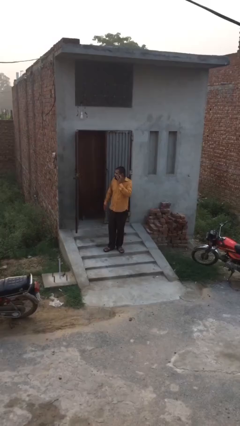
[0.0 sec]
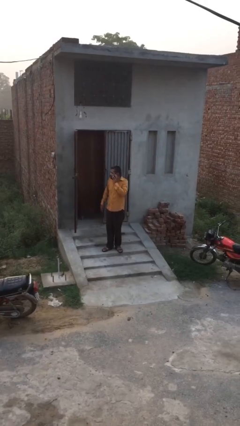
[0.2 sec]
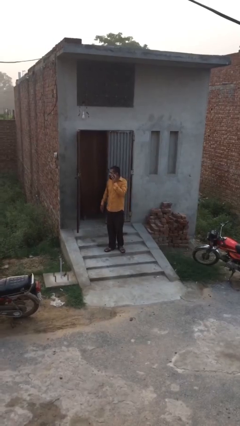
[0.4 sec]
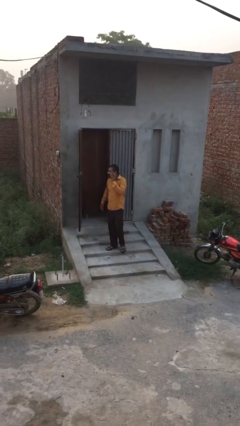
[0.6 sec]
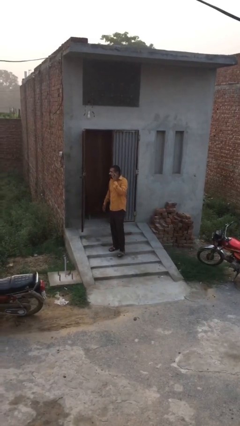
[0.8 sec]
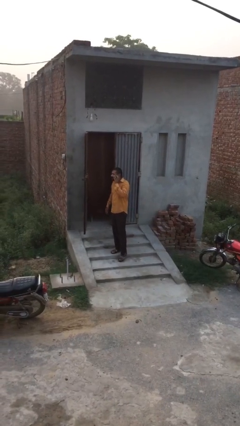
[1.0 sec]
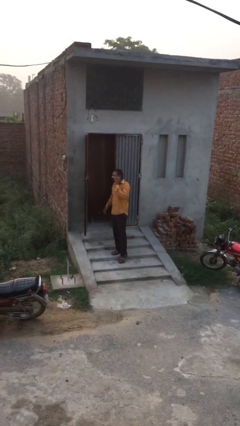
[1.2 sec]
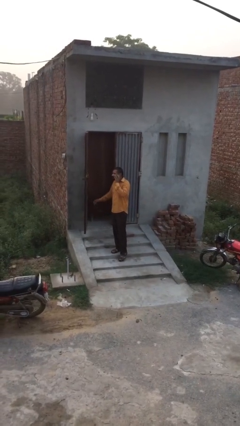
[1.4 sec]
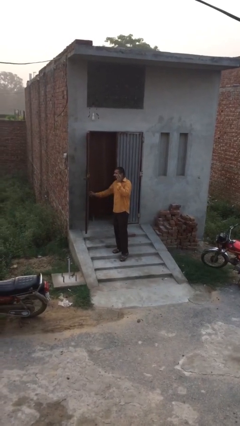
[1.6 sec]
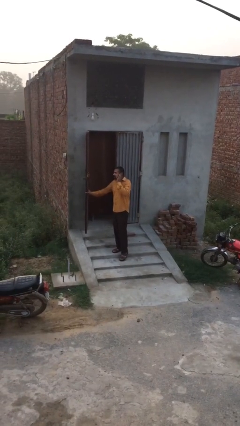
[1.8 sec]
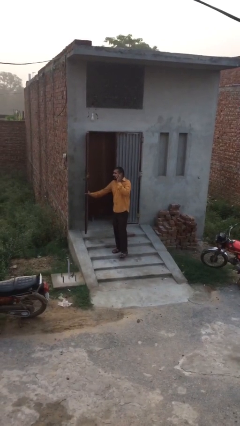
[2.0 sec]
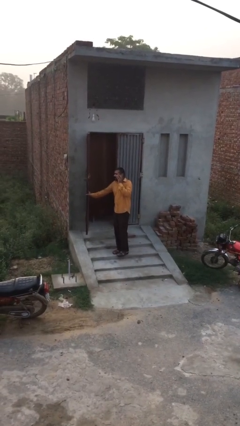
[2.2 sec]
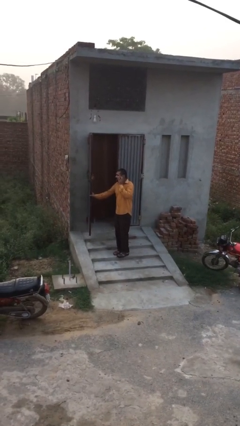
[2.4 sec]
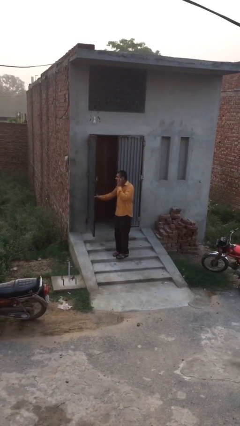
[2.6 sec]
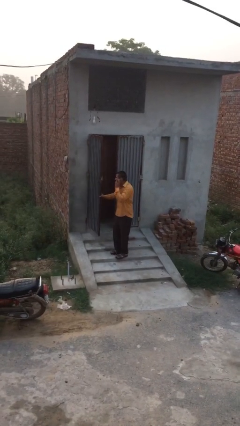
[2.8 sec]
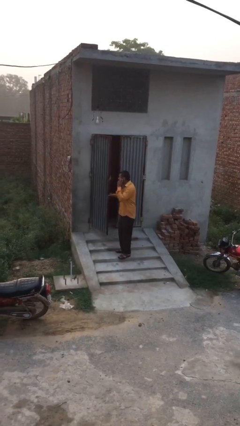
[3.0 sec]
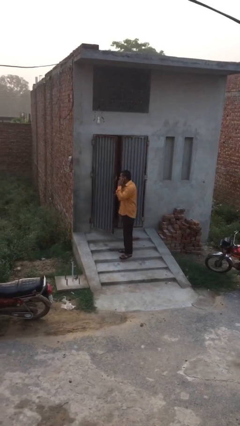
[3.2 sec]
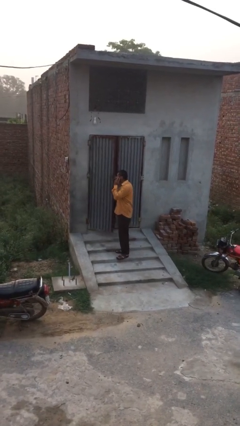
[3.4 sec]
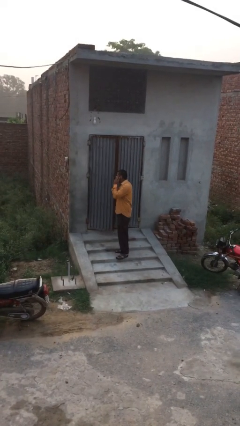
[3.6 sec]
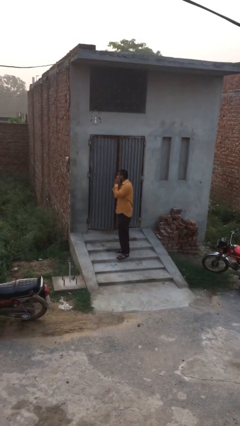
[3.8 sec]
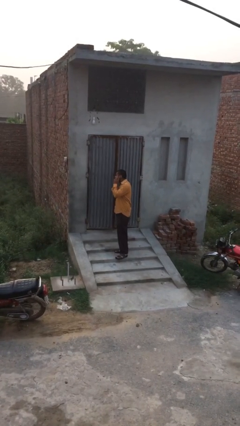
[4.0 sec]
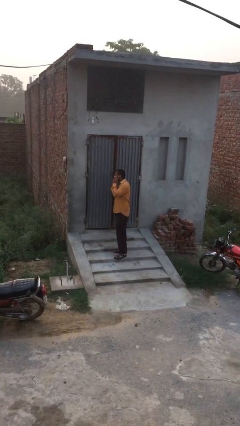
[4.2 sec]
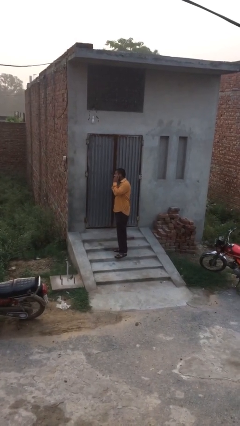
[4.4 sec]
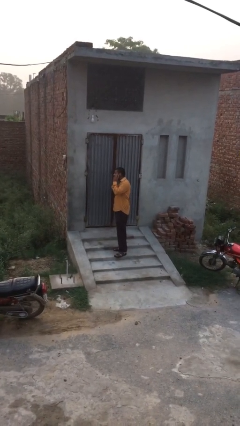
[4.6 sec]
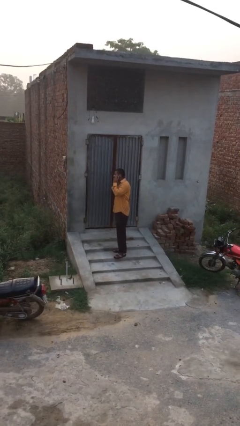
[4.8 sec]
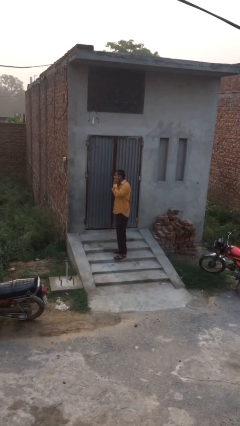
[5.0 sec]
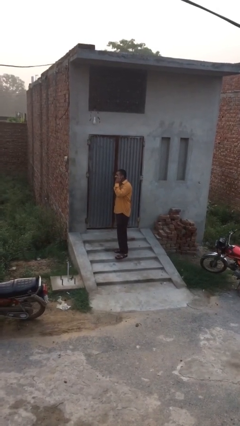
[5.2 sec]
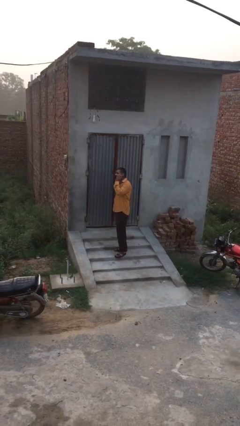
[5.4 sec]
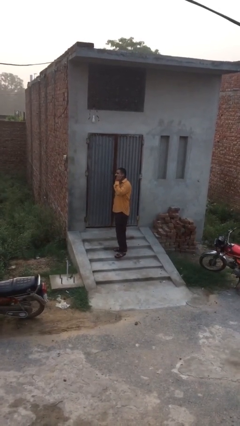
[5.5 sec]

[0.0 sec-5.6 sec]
person closes facility door

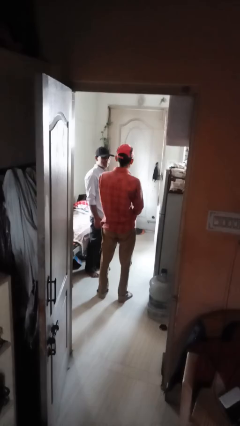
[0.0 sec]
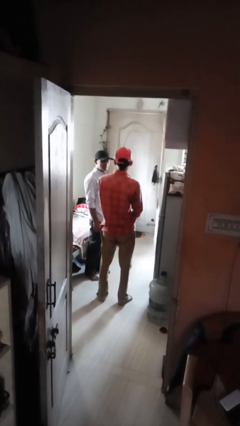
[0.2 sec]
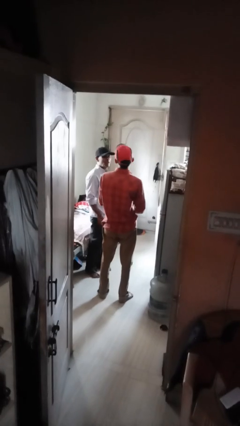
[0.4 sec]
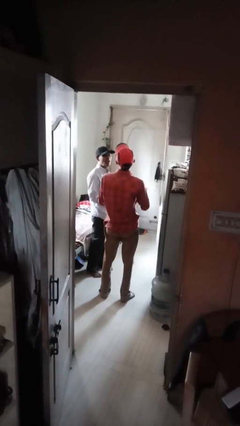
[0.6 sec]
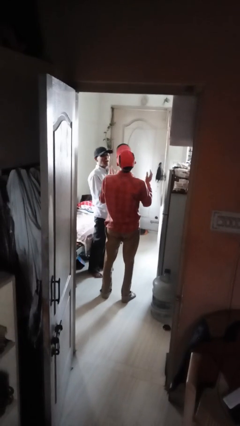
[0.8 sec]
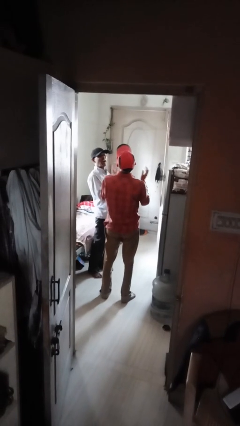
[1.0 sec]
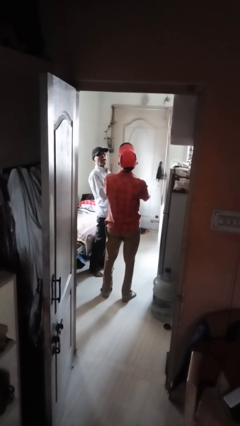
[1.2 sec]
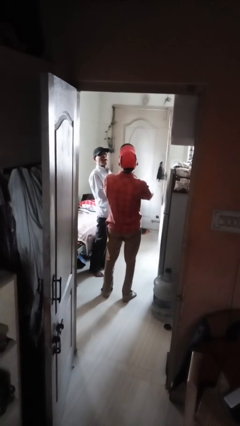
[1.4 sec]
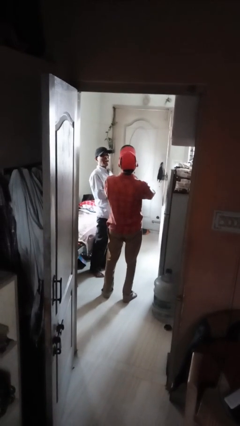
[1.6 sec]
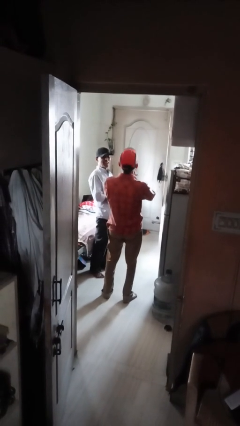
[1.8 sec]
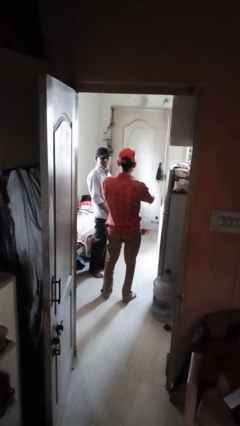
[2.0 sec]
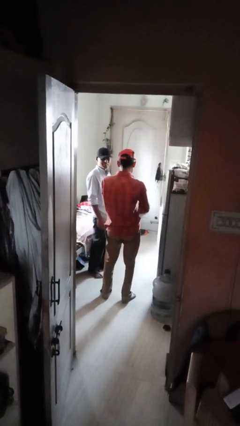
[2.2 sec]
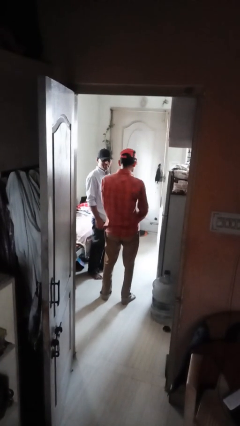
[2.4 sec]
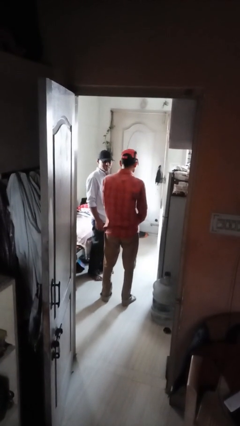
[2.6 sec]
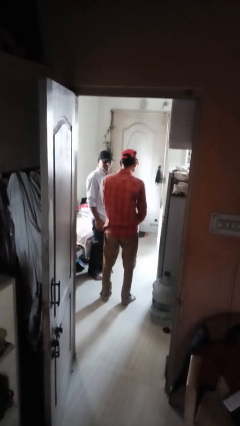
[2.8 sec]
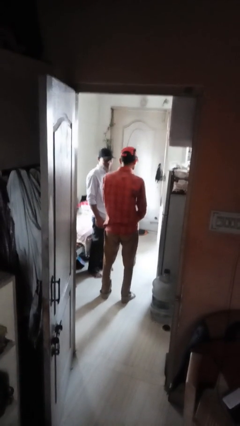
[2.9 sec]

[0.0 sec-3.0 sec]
person laughs with person

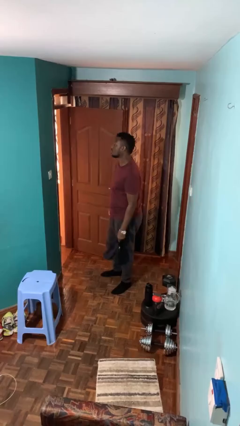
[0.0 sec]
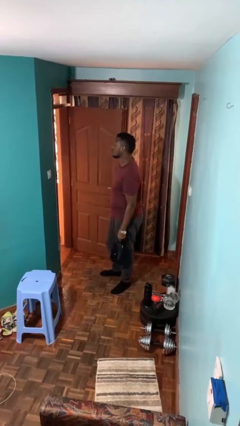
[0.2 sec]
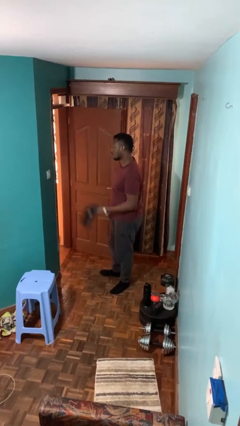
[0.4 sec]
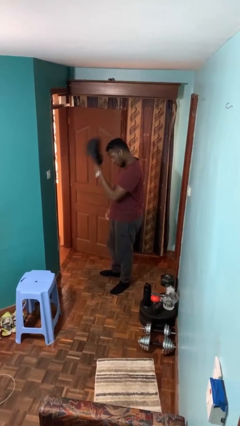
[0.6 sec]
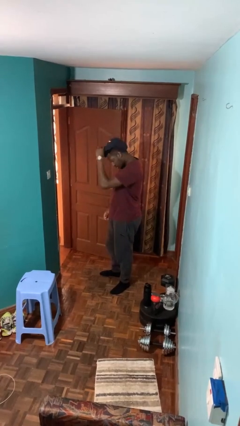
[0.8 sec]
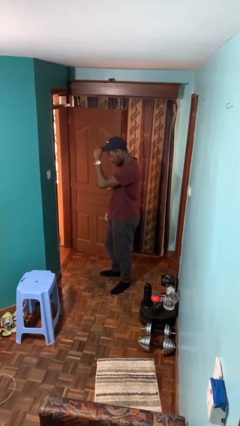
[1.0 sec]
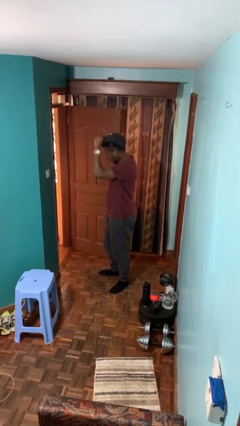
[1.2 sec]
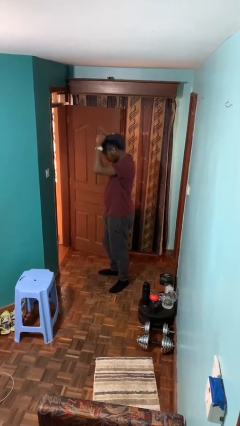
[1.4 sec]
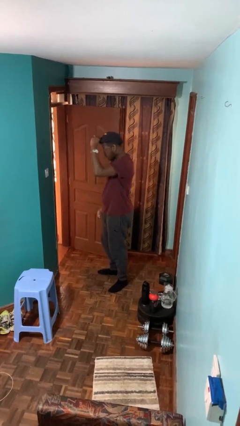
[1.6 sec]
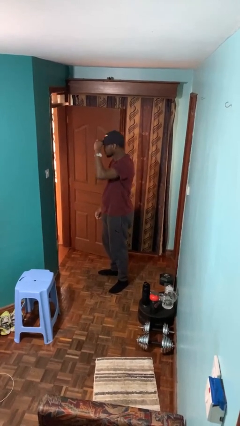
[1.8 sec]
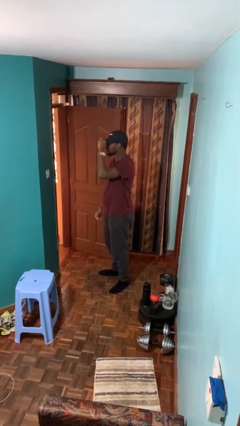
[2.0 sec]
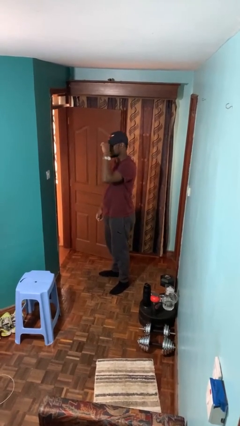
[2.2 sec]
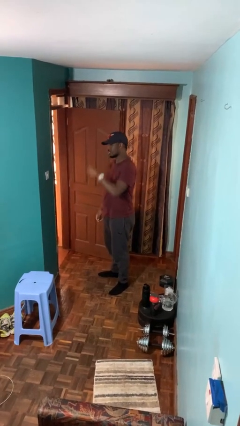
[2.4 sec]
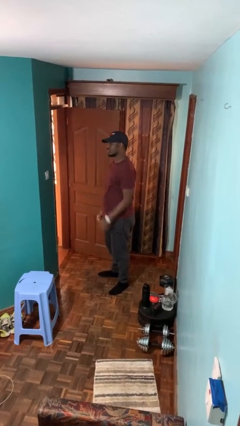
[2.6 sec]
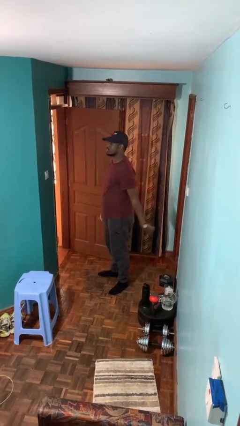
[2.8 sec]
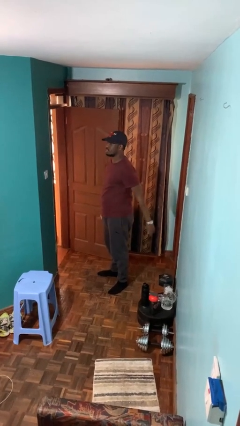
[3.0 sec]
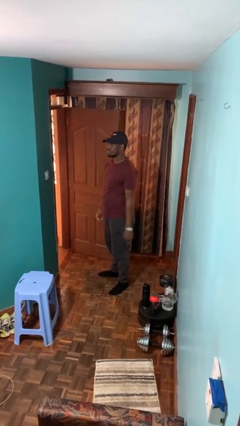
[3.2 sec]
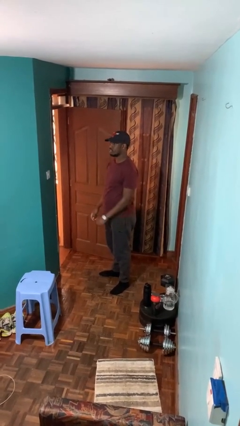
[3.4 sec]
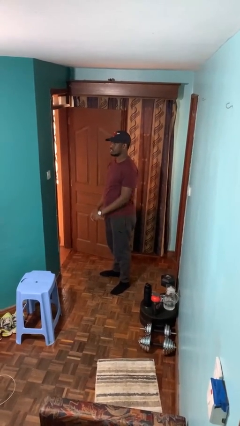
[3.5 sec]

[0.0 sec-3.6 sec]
person puts on hat

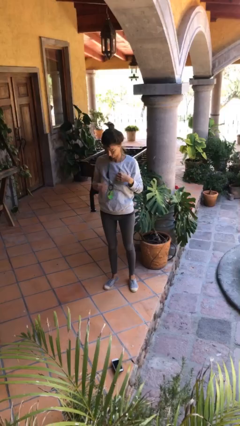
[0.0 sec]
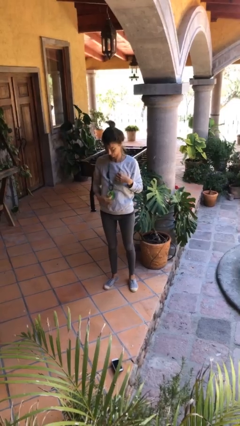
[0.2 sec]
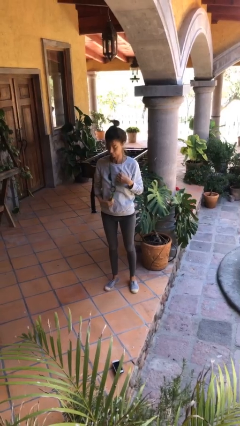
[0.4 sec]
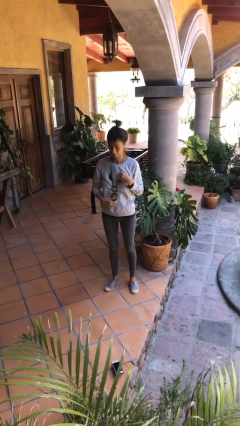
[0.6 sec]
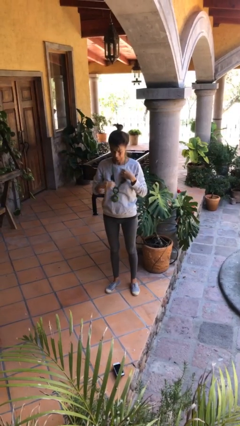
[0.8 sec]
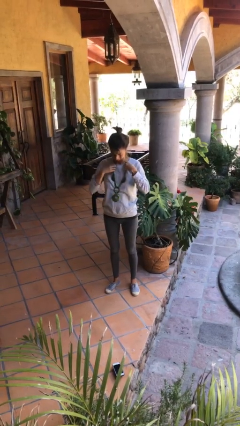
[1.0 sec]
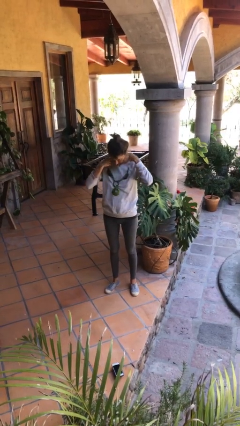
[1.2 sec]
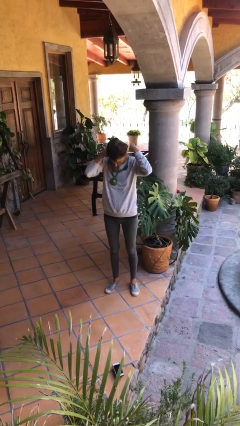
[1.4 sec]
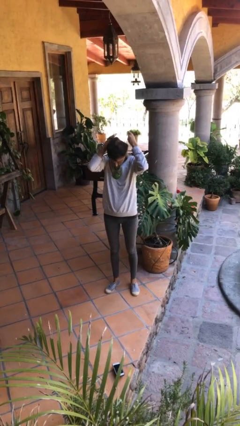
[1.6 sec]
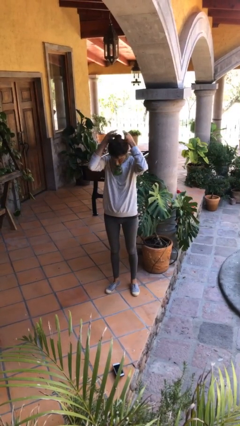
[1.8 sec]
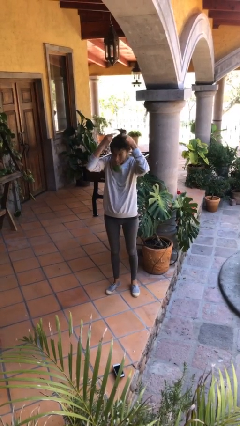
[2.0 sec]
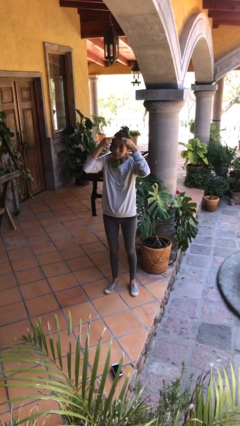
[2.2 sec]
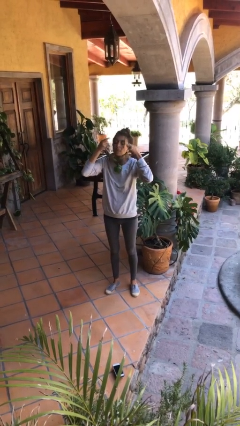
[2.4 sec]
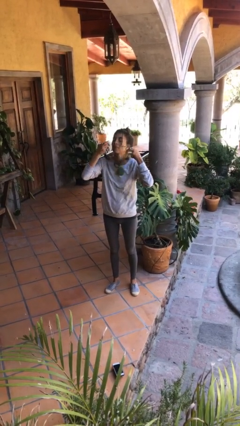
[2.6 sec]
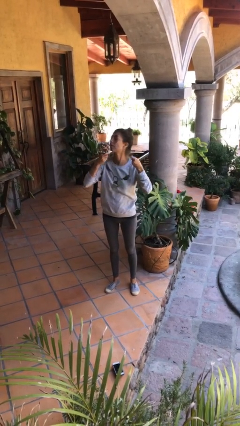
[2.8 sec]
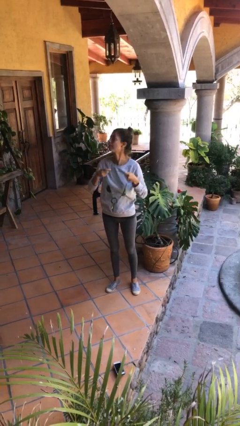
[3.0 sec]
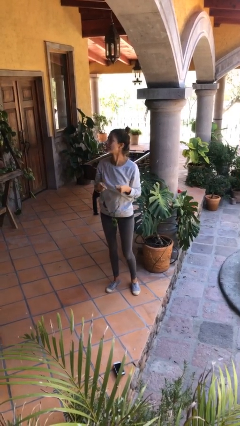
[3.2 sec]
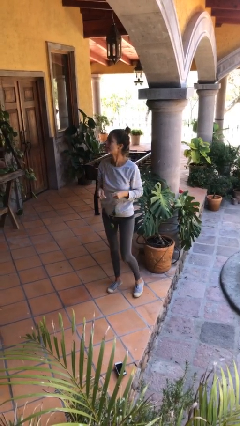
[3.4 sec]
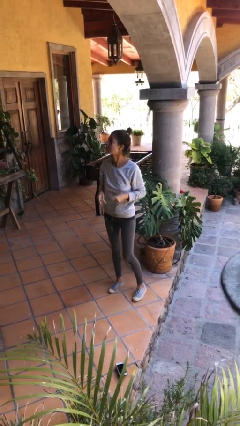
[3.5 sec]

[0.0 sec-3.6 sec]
person takes off necklace

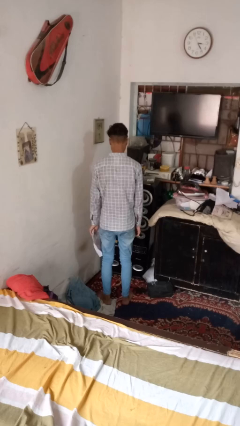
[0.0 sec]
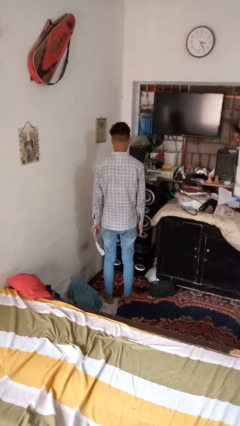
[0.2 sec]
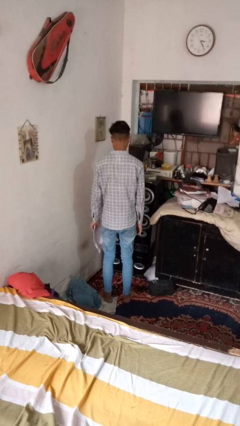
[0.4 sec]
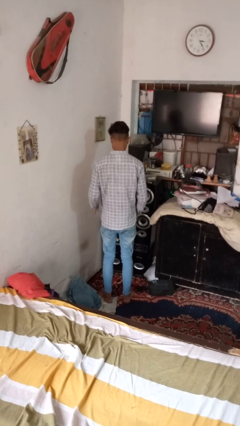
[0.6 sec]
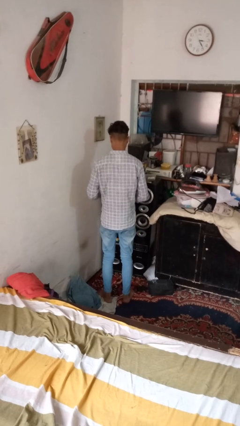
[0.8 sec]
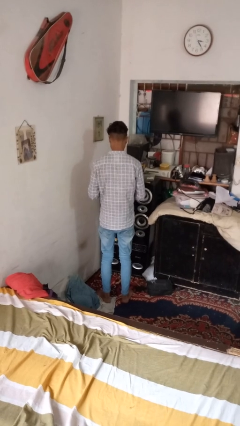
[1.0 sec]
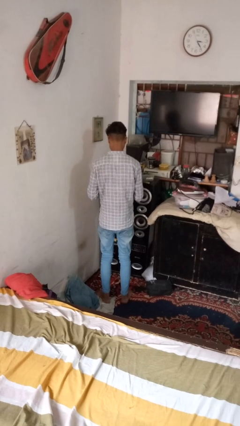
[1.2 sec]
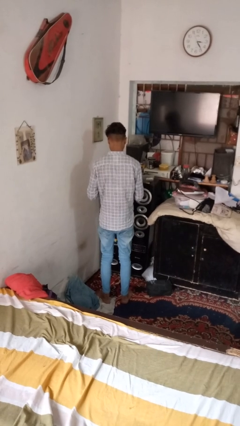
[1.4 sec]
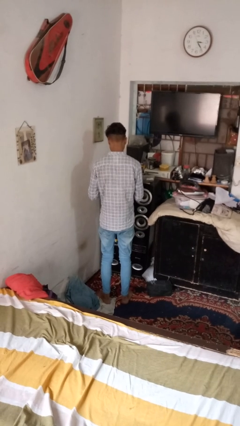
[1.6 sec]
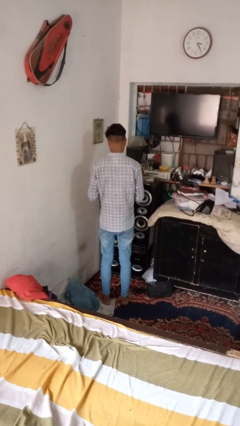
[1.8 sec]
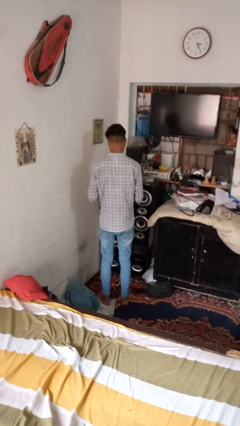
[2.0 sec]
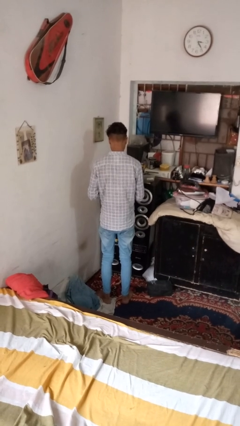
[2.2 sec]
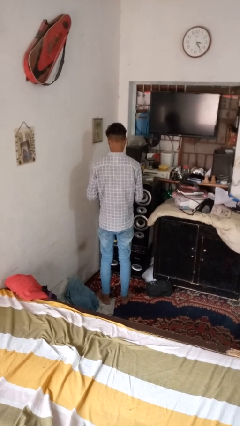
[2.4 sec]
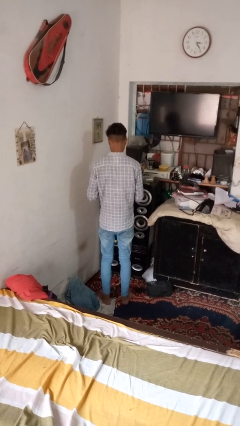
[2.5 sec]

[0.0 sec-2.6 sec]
person crumples paper
